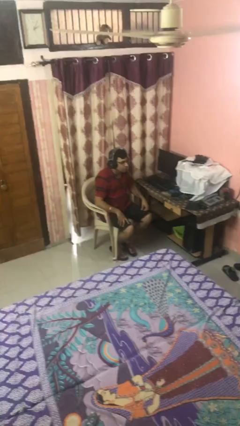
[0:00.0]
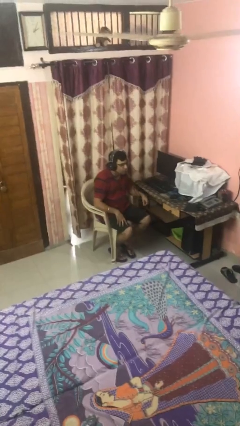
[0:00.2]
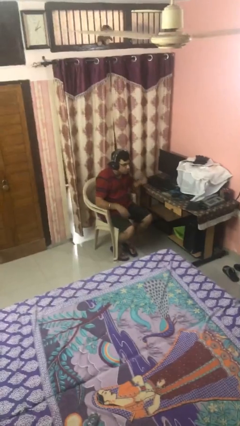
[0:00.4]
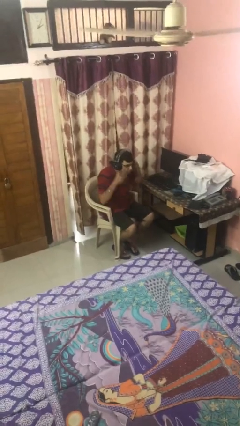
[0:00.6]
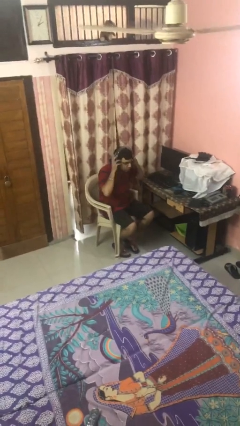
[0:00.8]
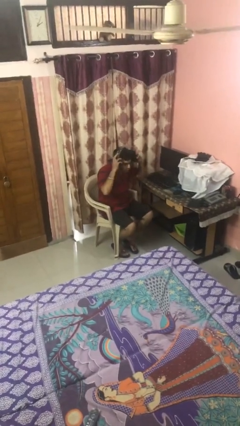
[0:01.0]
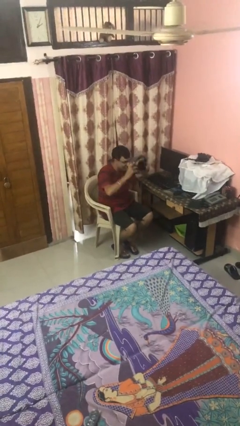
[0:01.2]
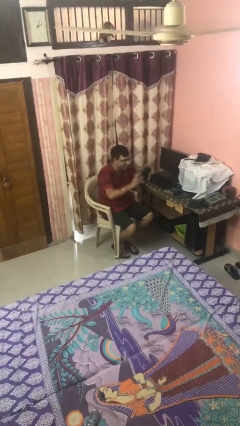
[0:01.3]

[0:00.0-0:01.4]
person takes off headphones

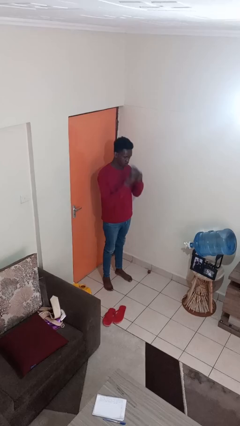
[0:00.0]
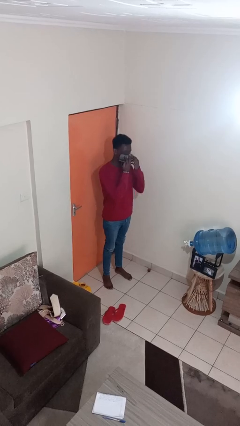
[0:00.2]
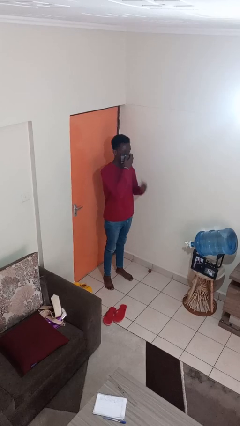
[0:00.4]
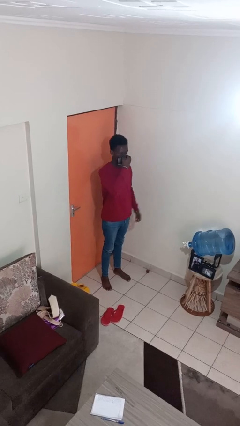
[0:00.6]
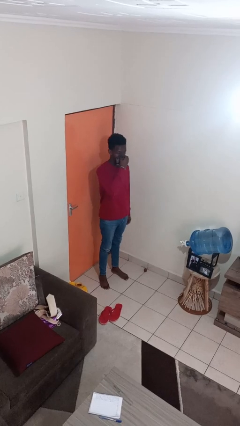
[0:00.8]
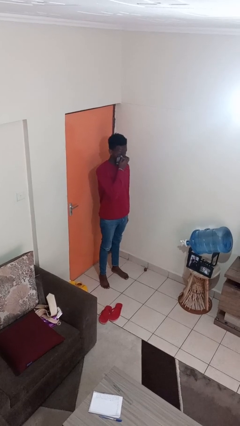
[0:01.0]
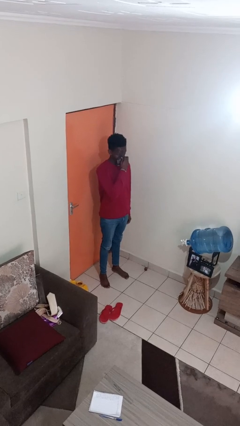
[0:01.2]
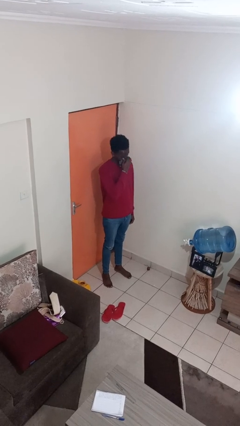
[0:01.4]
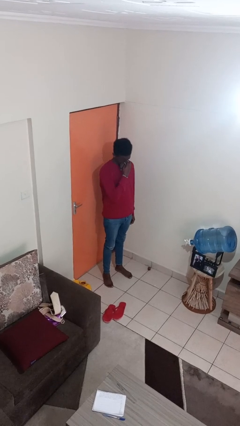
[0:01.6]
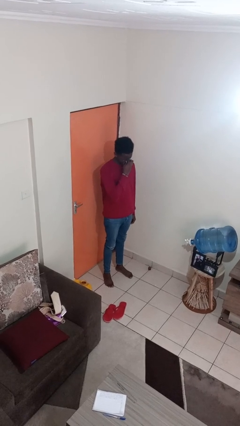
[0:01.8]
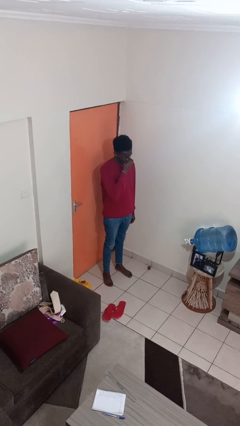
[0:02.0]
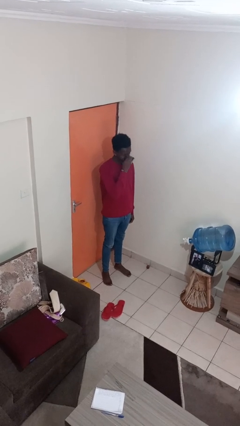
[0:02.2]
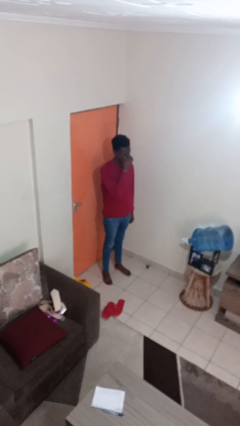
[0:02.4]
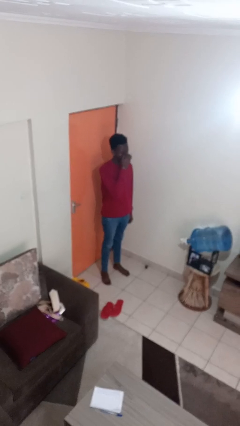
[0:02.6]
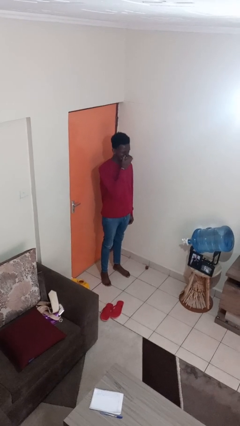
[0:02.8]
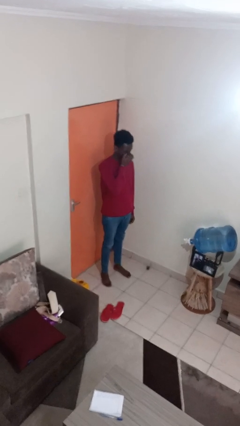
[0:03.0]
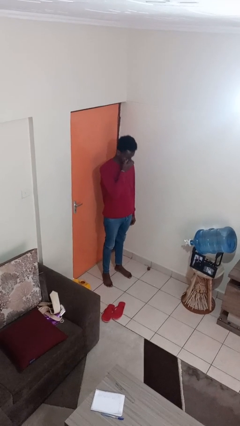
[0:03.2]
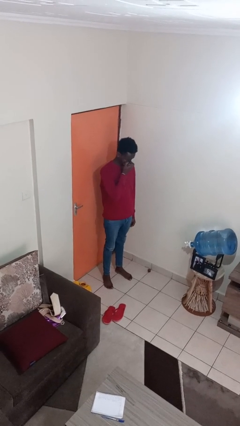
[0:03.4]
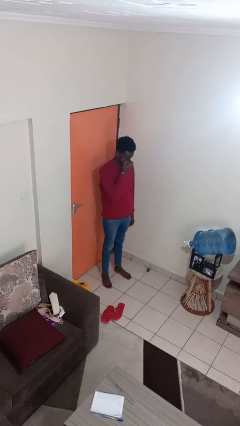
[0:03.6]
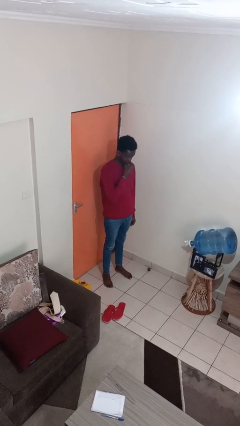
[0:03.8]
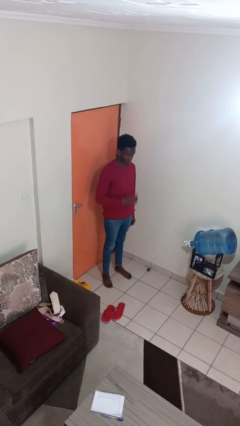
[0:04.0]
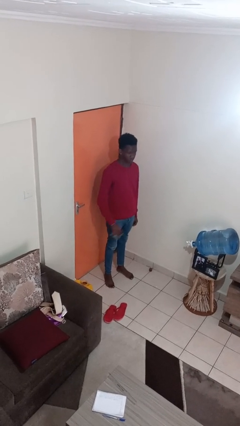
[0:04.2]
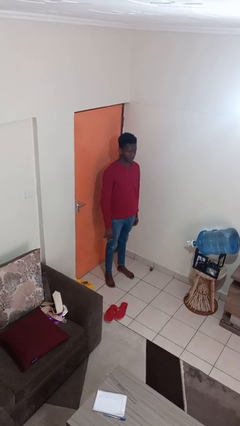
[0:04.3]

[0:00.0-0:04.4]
person blows nose

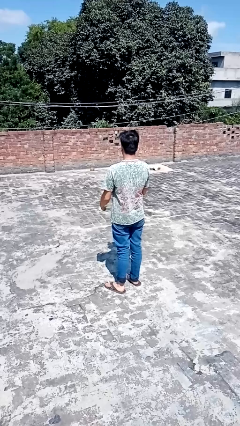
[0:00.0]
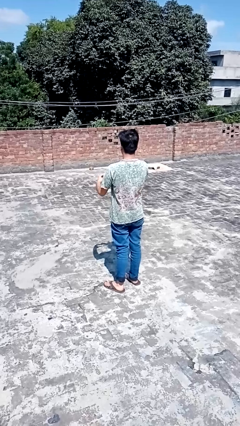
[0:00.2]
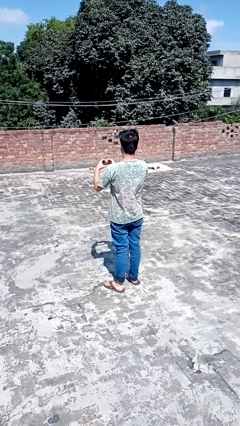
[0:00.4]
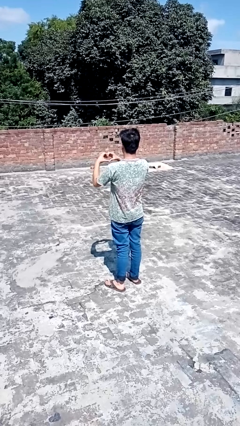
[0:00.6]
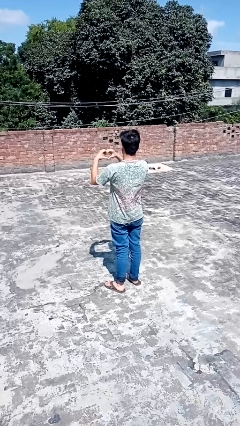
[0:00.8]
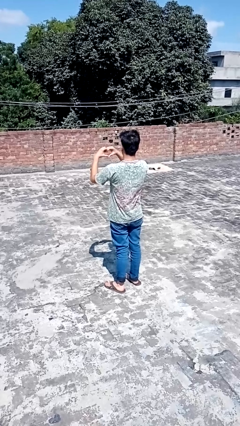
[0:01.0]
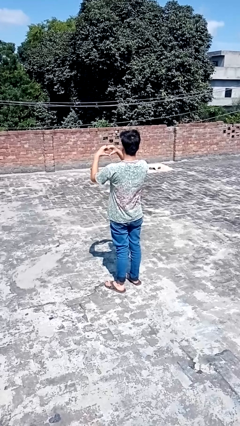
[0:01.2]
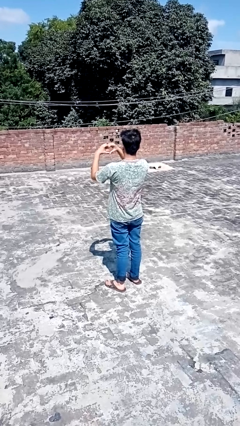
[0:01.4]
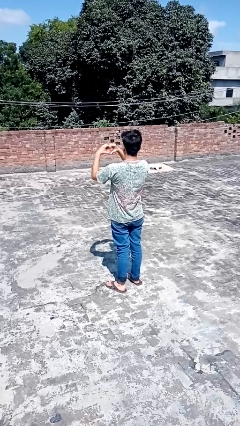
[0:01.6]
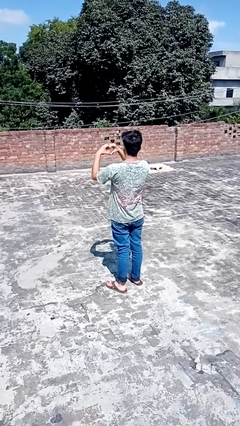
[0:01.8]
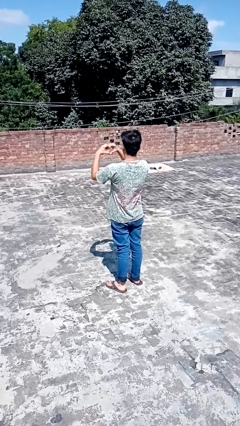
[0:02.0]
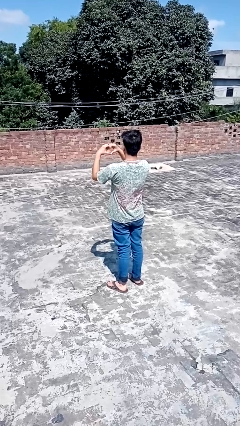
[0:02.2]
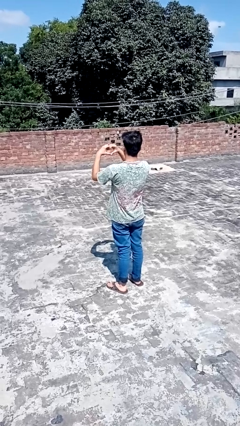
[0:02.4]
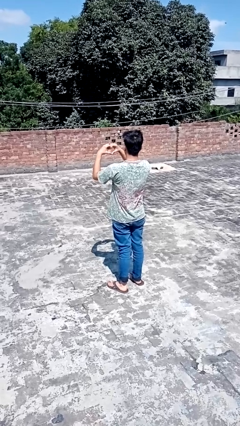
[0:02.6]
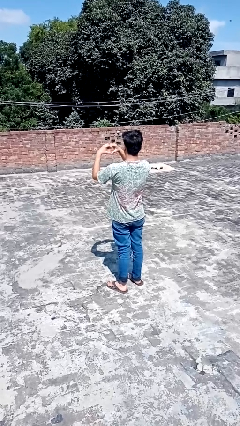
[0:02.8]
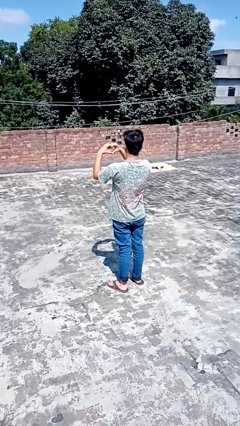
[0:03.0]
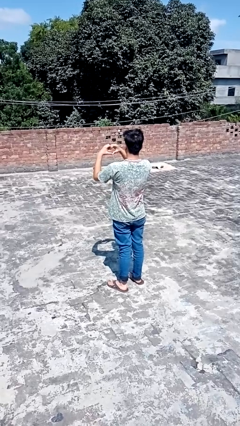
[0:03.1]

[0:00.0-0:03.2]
person gestures heart

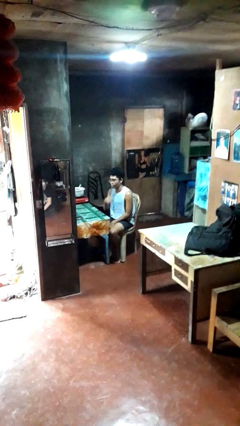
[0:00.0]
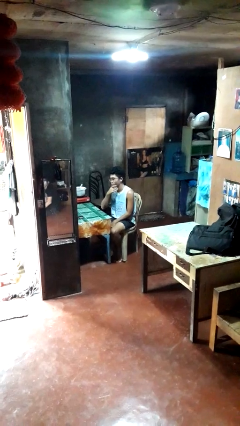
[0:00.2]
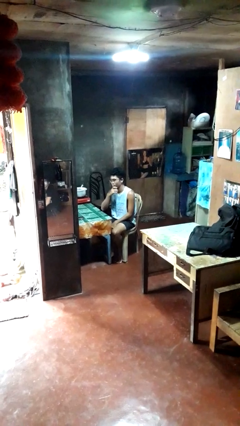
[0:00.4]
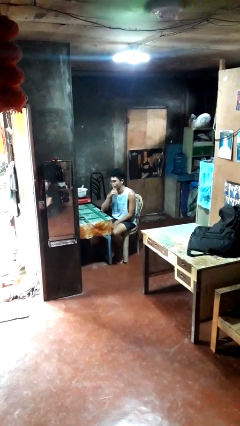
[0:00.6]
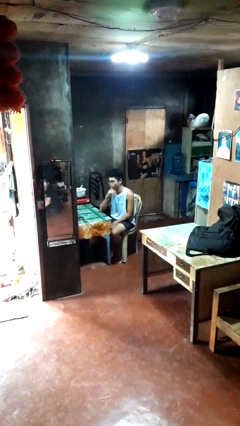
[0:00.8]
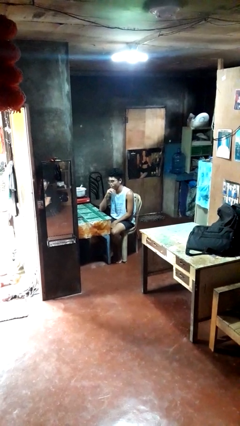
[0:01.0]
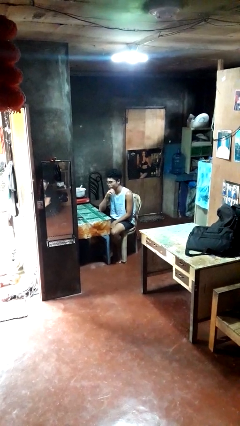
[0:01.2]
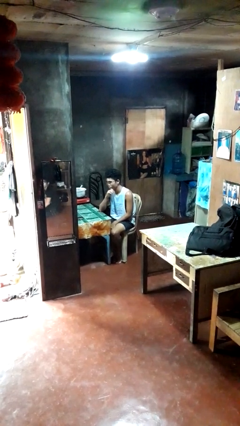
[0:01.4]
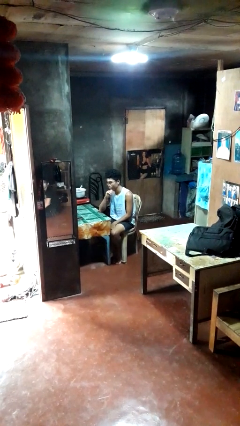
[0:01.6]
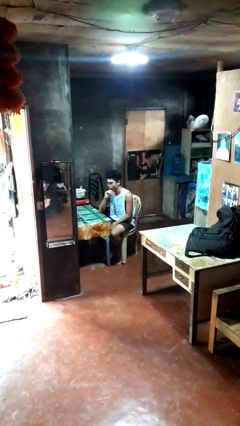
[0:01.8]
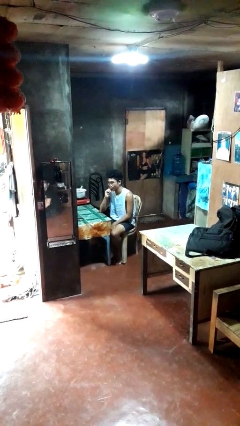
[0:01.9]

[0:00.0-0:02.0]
person strokes chin

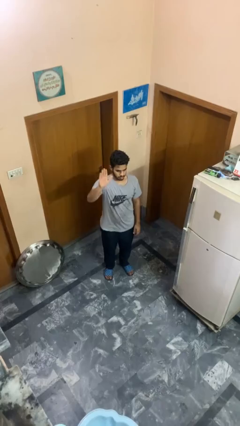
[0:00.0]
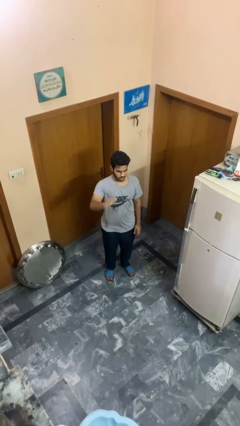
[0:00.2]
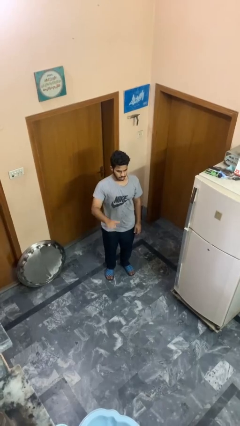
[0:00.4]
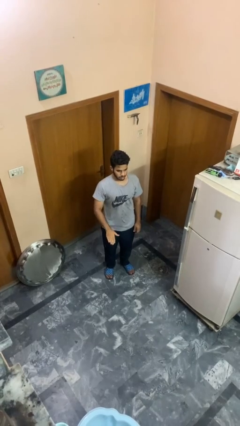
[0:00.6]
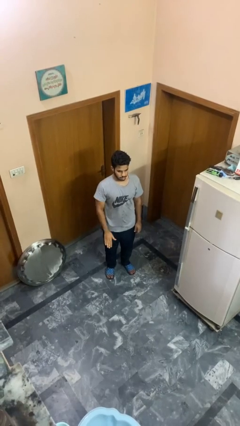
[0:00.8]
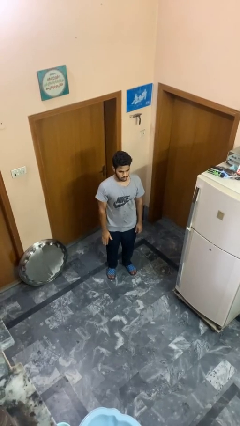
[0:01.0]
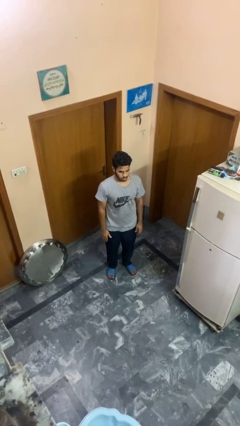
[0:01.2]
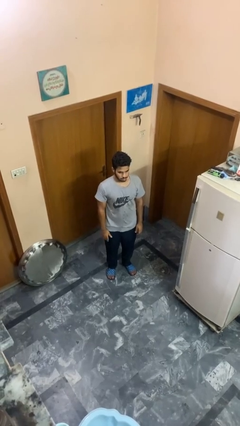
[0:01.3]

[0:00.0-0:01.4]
person gestures lower hand

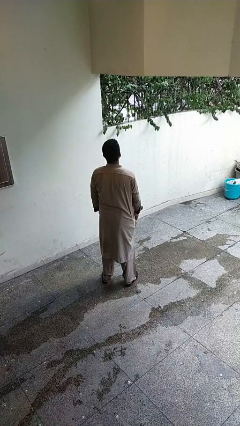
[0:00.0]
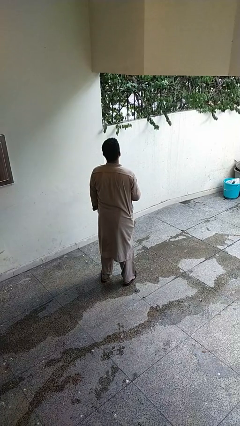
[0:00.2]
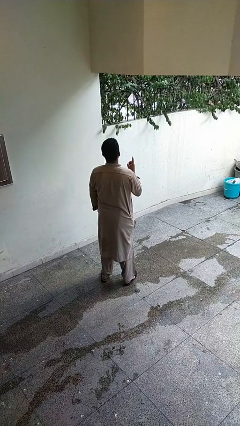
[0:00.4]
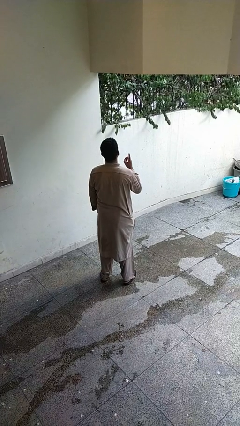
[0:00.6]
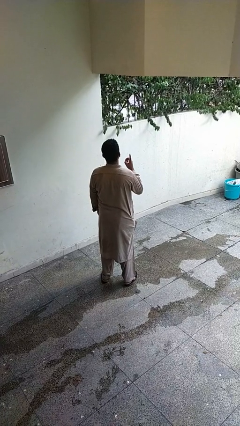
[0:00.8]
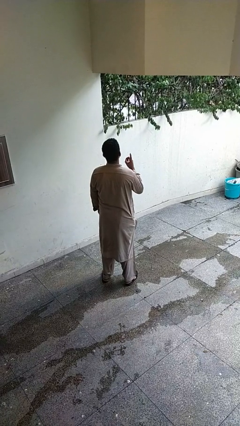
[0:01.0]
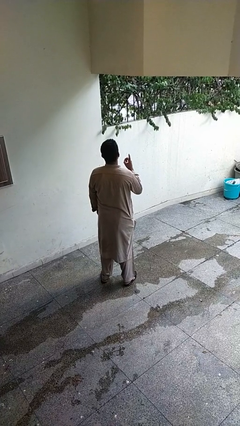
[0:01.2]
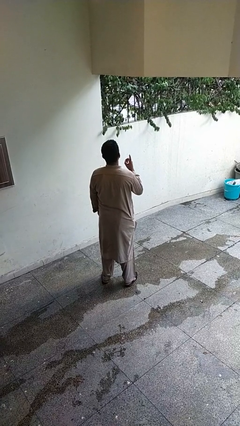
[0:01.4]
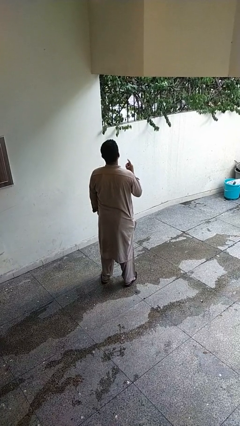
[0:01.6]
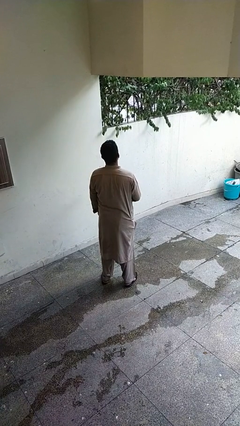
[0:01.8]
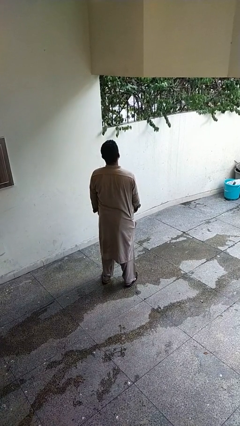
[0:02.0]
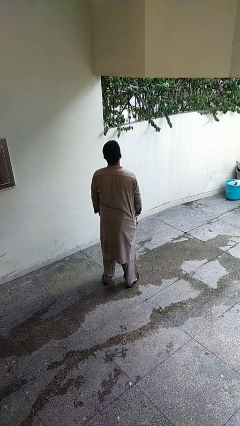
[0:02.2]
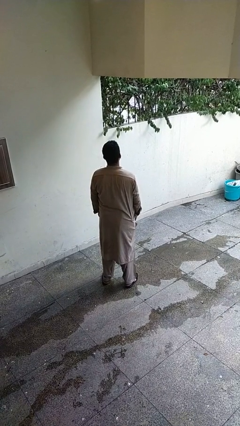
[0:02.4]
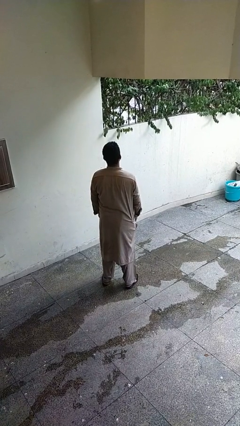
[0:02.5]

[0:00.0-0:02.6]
person gestures number one

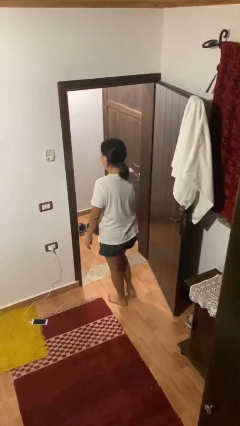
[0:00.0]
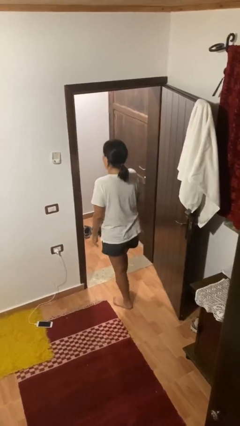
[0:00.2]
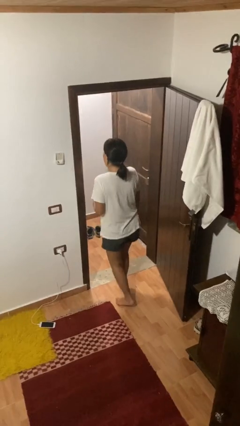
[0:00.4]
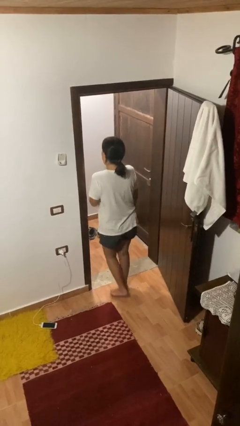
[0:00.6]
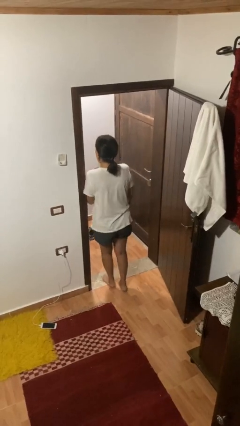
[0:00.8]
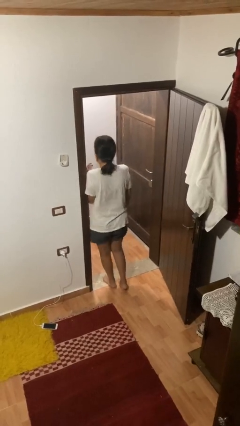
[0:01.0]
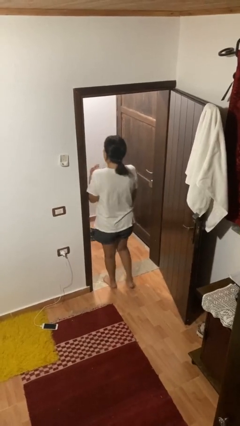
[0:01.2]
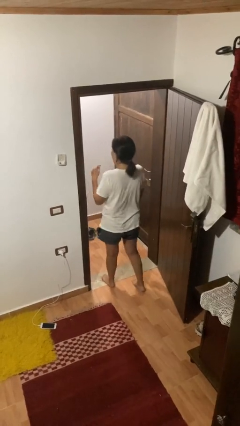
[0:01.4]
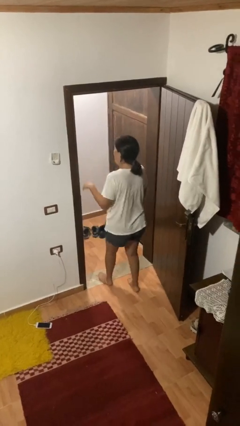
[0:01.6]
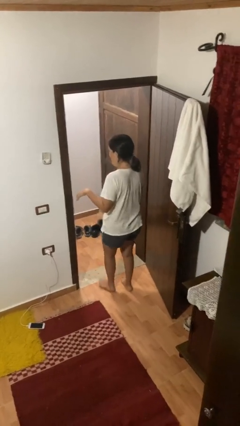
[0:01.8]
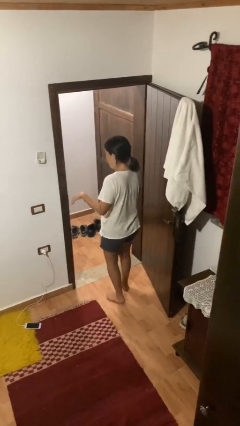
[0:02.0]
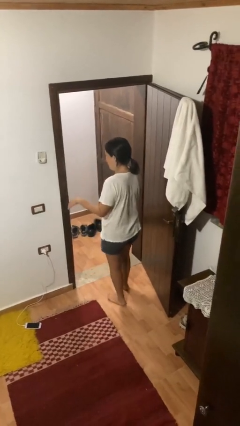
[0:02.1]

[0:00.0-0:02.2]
person bumps into wall
